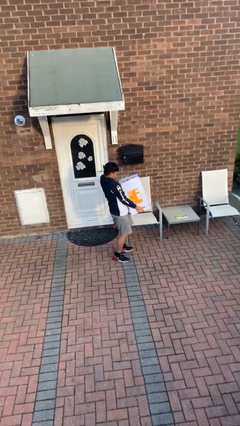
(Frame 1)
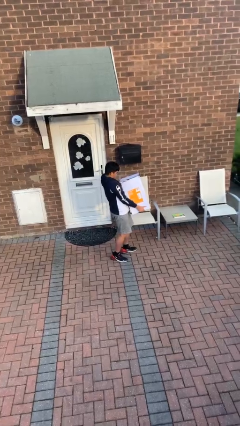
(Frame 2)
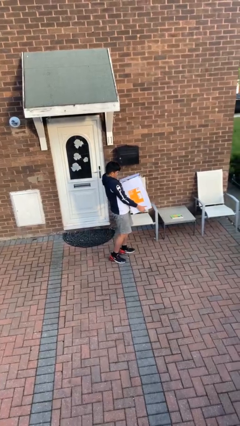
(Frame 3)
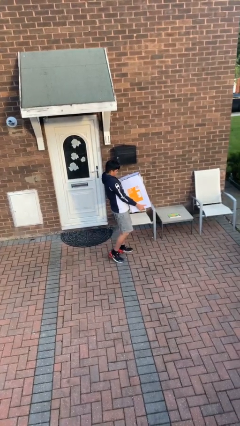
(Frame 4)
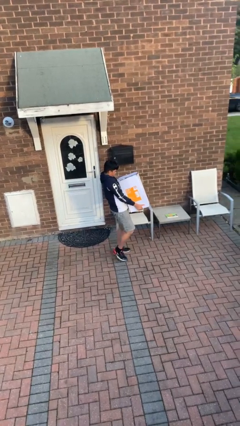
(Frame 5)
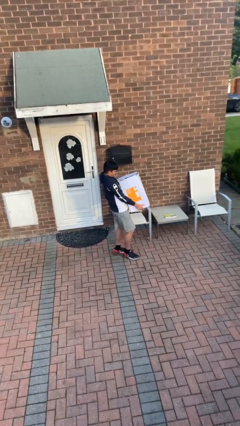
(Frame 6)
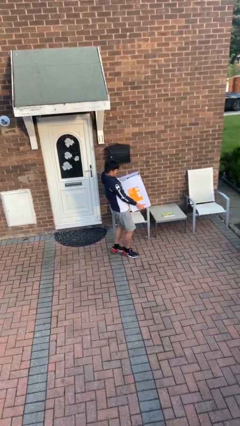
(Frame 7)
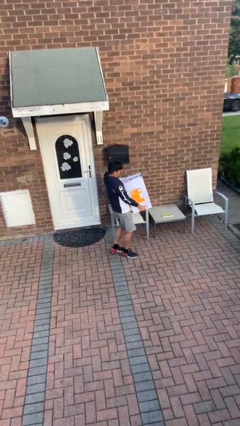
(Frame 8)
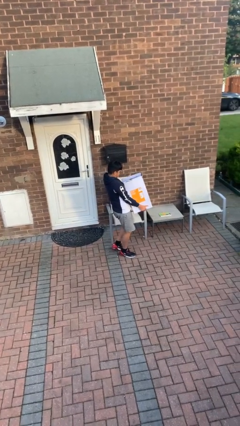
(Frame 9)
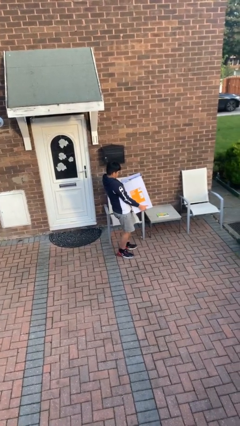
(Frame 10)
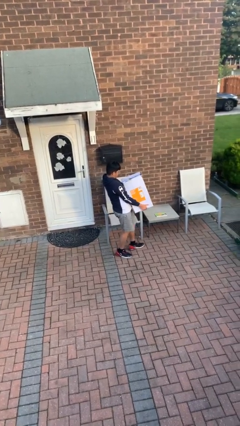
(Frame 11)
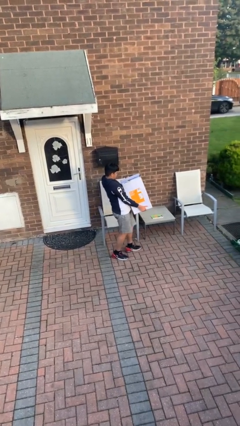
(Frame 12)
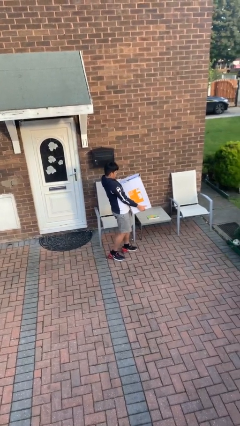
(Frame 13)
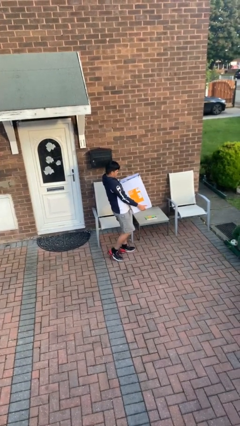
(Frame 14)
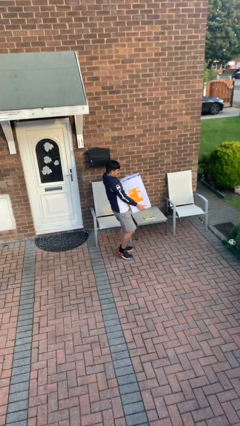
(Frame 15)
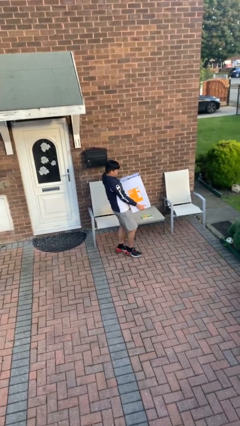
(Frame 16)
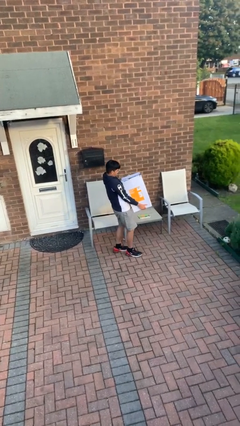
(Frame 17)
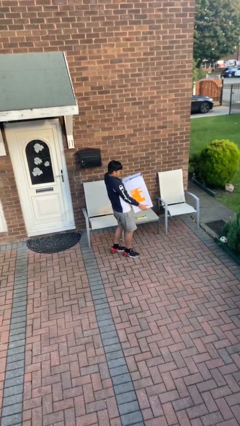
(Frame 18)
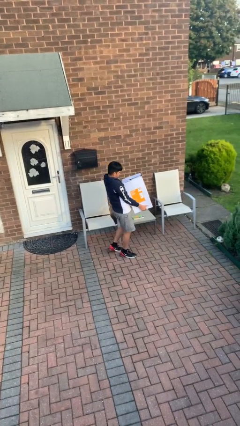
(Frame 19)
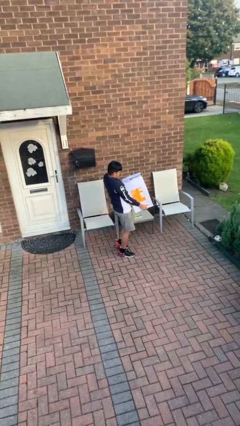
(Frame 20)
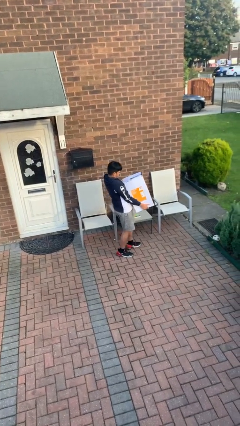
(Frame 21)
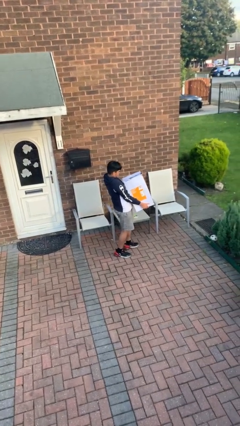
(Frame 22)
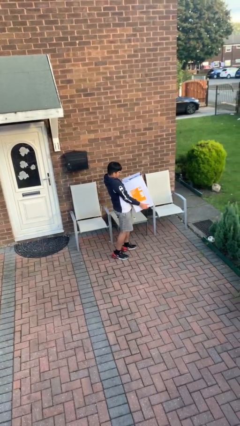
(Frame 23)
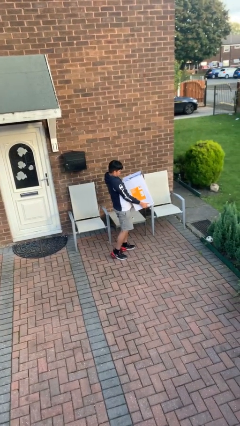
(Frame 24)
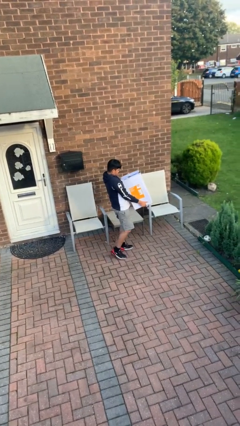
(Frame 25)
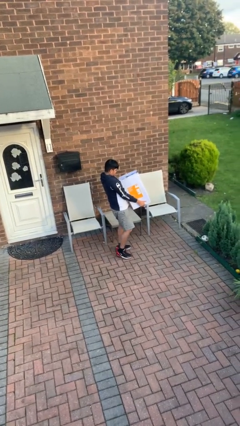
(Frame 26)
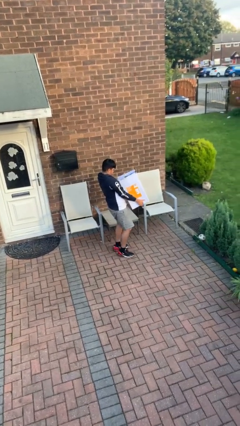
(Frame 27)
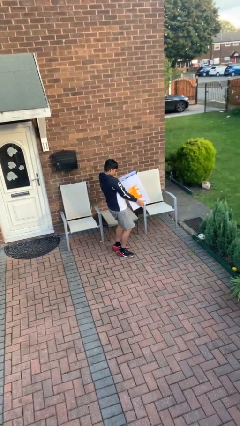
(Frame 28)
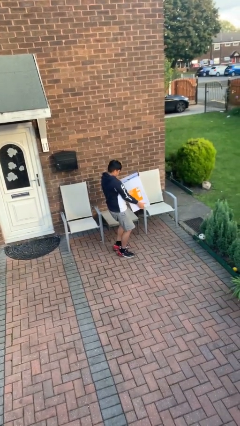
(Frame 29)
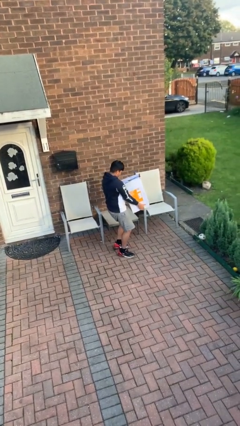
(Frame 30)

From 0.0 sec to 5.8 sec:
person carries heavy object

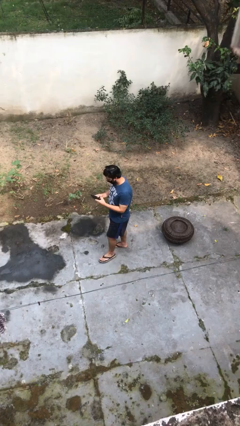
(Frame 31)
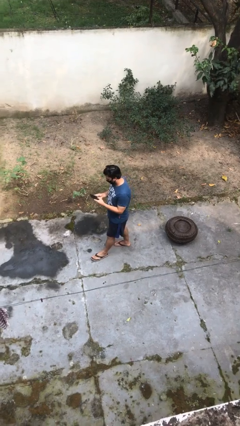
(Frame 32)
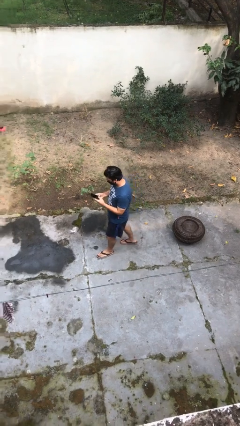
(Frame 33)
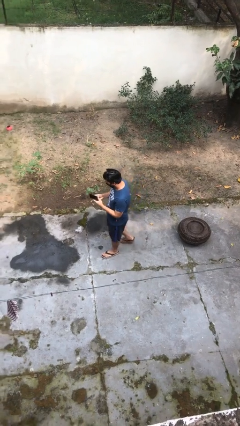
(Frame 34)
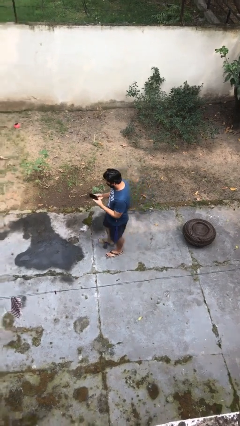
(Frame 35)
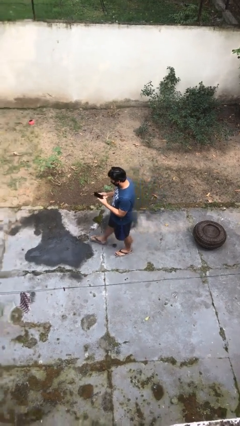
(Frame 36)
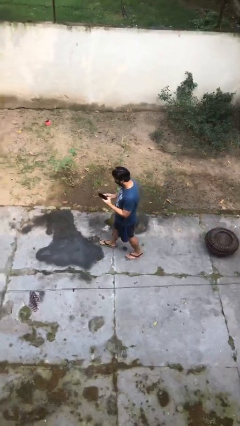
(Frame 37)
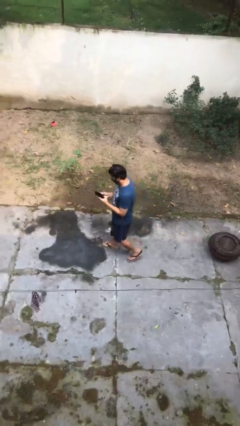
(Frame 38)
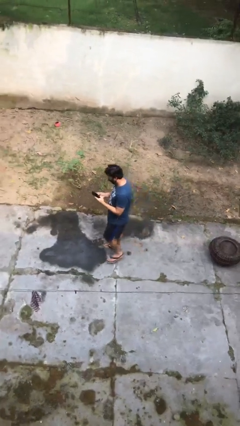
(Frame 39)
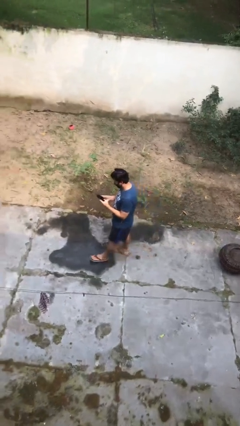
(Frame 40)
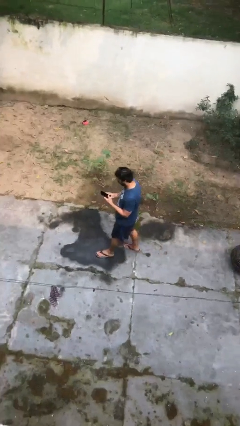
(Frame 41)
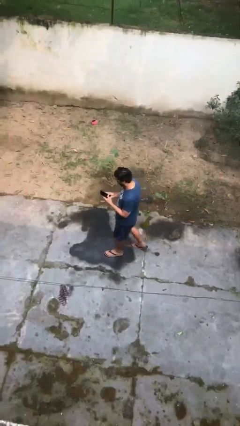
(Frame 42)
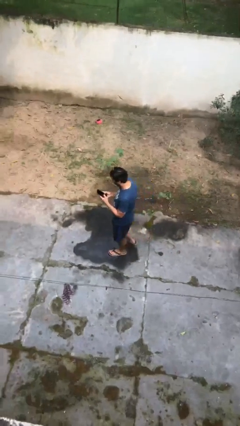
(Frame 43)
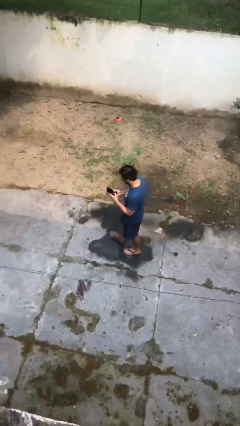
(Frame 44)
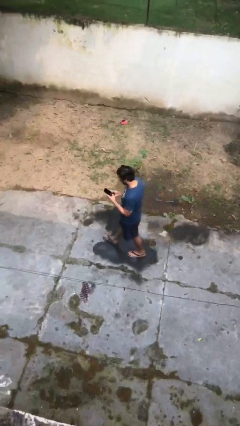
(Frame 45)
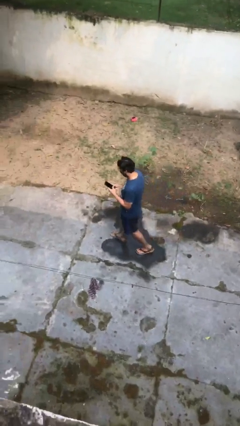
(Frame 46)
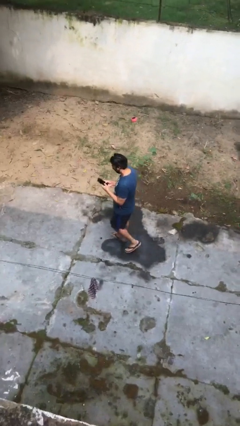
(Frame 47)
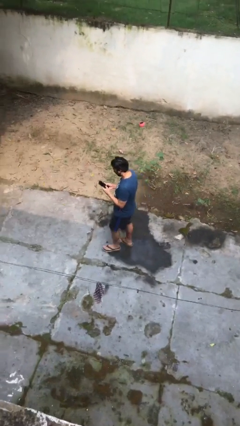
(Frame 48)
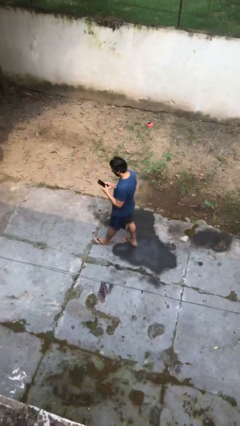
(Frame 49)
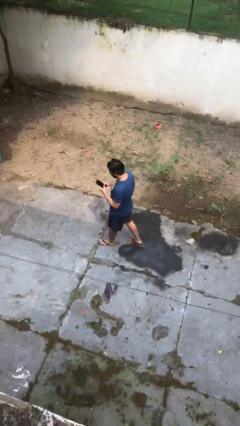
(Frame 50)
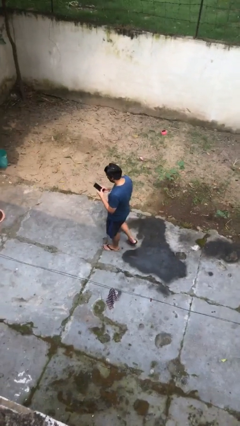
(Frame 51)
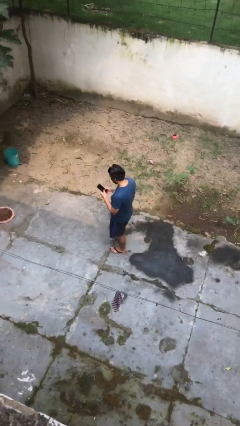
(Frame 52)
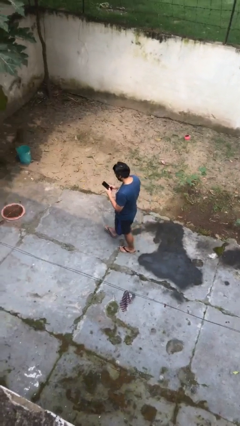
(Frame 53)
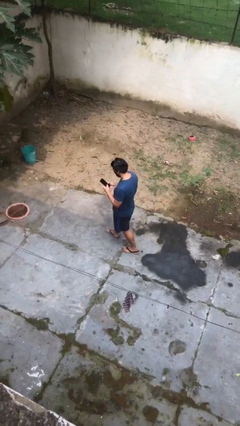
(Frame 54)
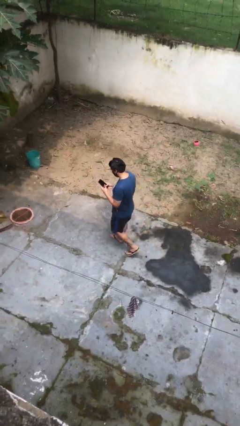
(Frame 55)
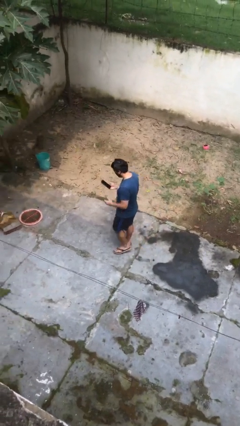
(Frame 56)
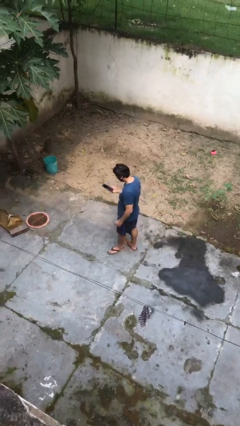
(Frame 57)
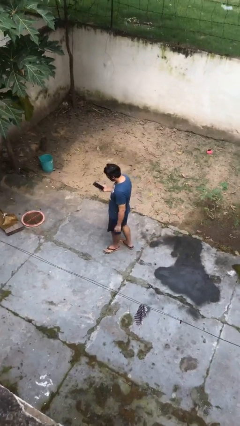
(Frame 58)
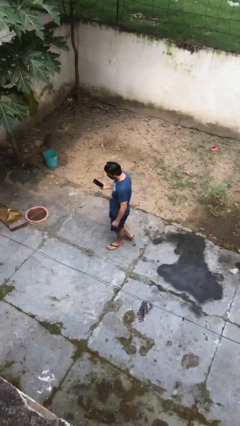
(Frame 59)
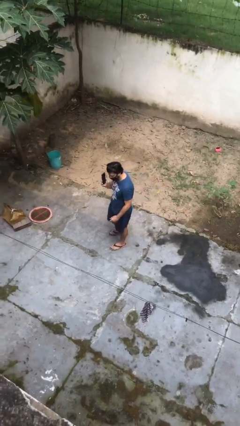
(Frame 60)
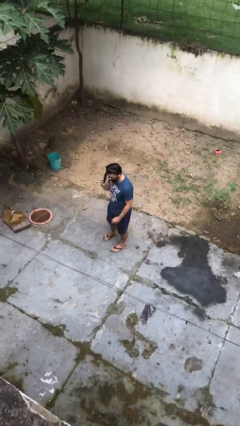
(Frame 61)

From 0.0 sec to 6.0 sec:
person texts on phone

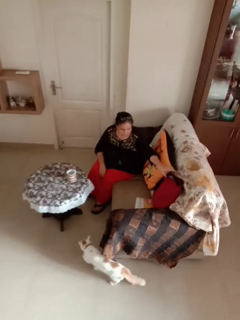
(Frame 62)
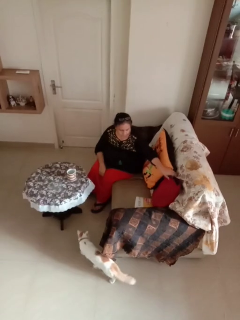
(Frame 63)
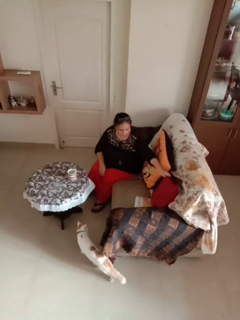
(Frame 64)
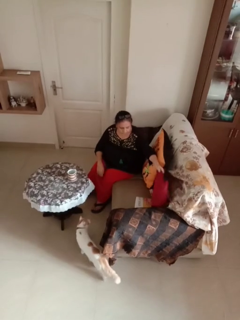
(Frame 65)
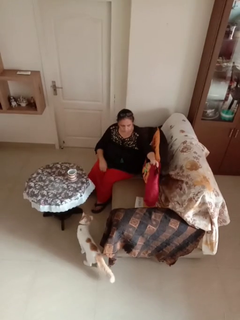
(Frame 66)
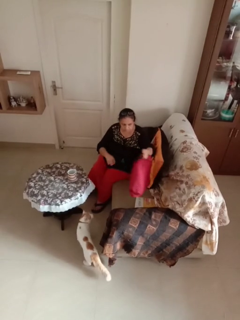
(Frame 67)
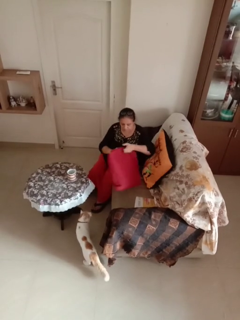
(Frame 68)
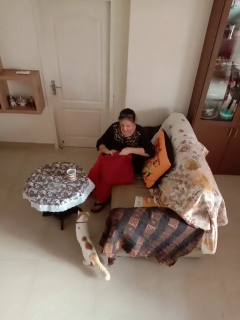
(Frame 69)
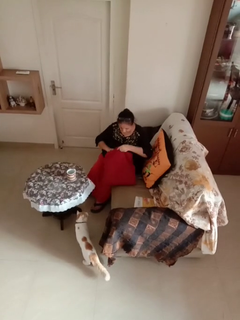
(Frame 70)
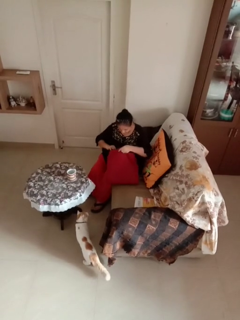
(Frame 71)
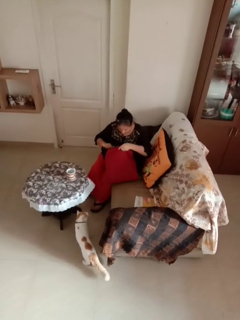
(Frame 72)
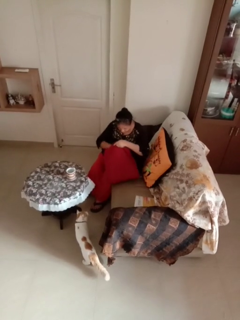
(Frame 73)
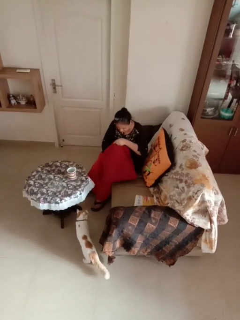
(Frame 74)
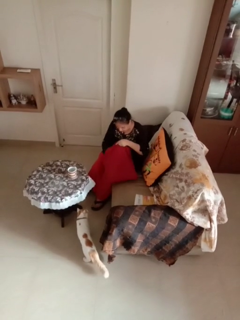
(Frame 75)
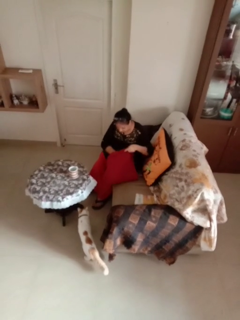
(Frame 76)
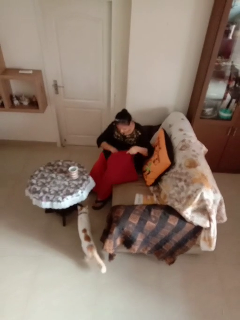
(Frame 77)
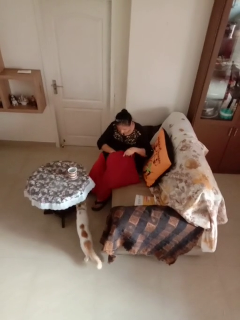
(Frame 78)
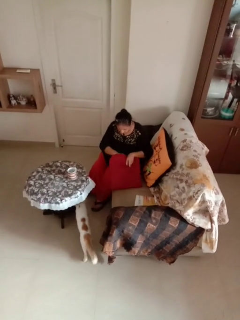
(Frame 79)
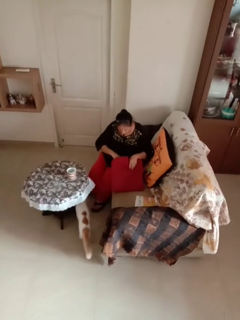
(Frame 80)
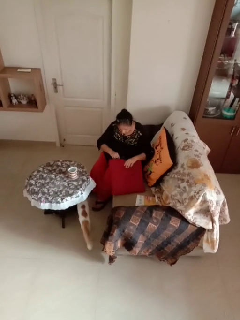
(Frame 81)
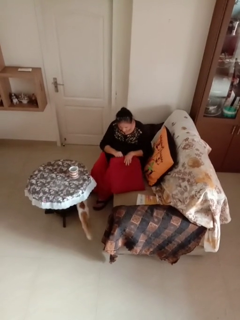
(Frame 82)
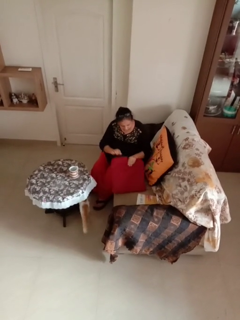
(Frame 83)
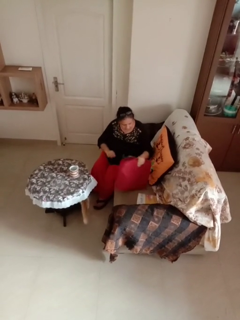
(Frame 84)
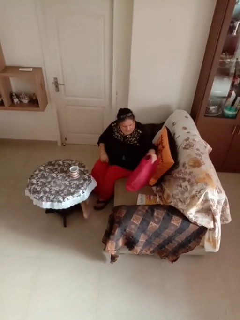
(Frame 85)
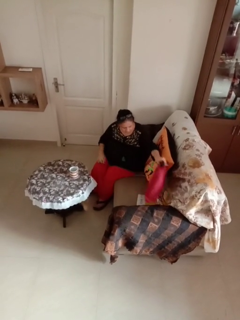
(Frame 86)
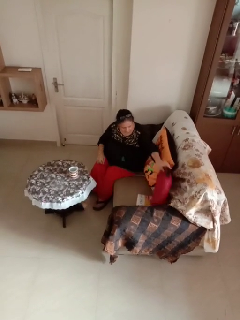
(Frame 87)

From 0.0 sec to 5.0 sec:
person searches in couch

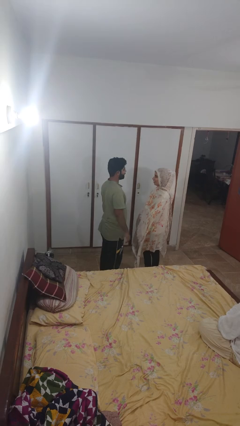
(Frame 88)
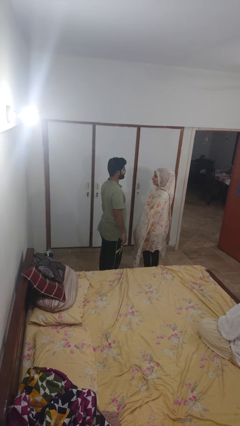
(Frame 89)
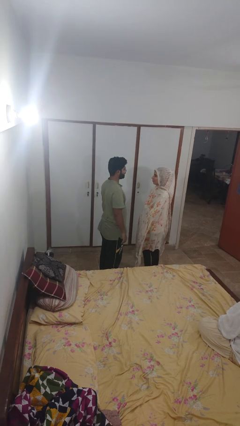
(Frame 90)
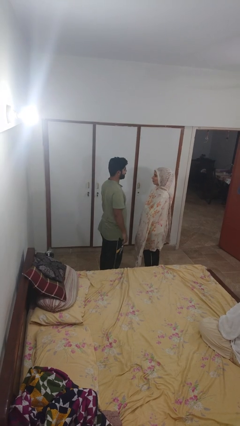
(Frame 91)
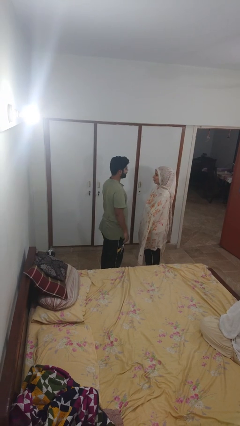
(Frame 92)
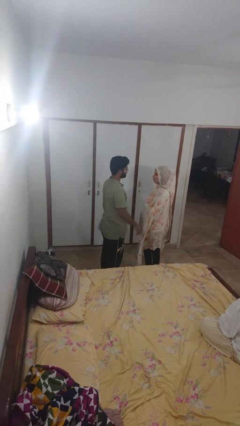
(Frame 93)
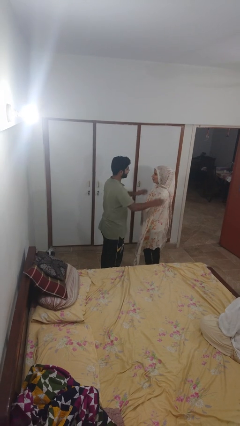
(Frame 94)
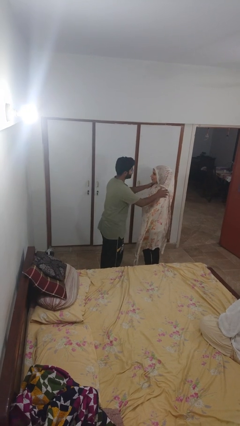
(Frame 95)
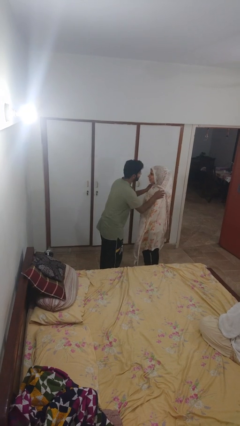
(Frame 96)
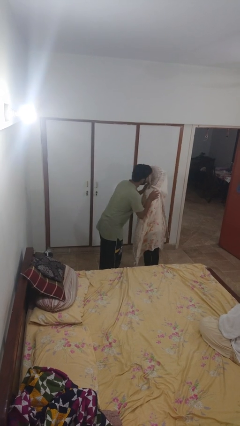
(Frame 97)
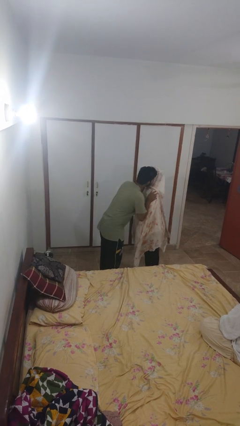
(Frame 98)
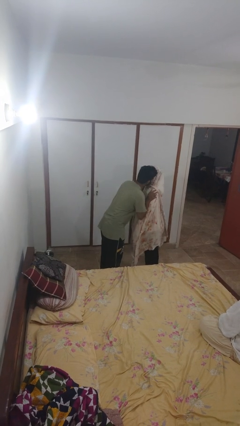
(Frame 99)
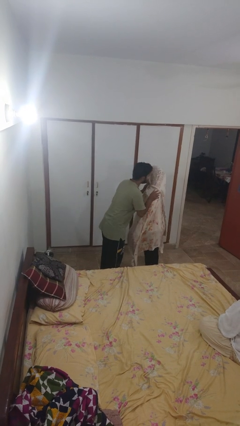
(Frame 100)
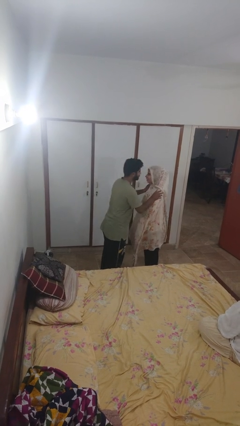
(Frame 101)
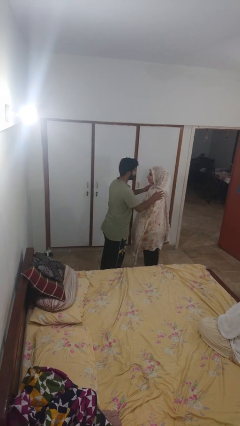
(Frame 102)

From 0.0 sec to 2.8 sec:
person kisses cheek of person
